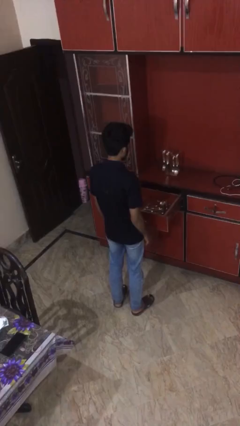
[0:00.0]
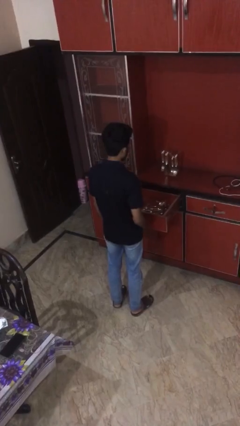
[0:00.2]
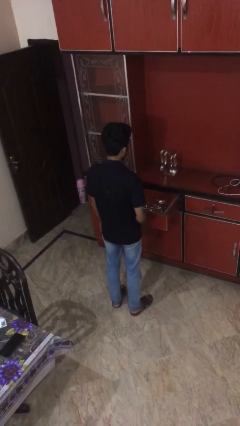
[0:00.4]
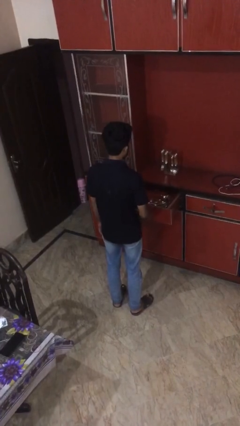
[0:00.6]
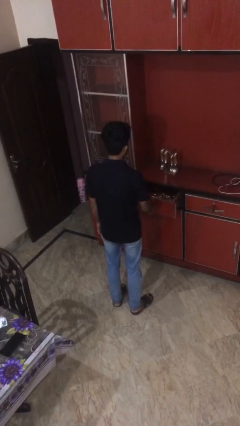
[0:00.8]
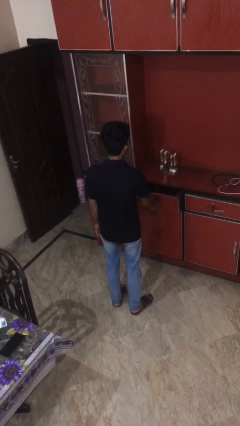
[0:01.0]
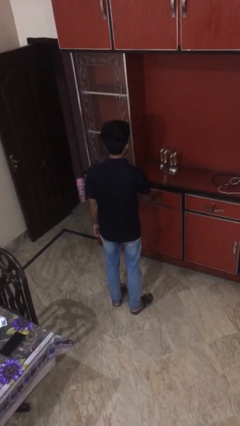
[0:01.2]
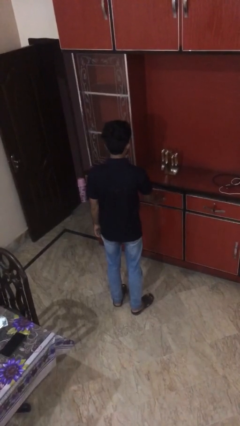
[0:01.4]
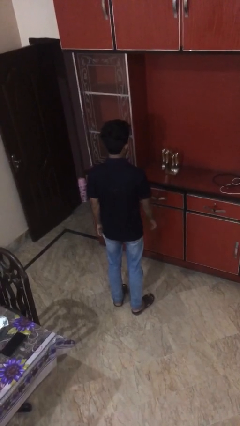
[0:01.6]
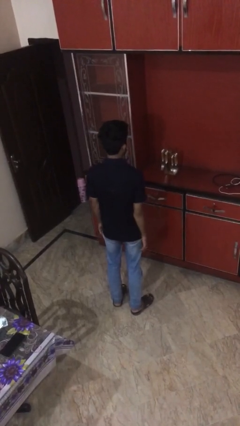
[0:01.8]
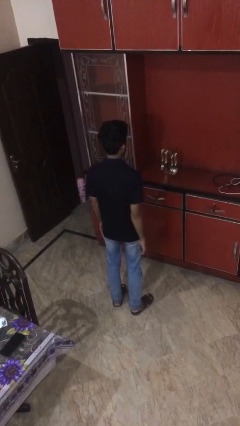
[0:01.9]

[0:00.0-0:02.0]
person closes kitchen drawer

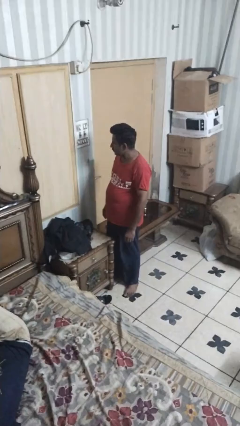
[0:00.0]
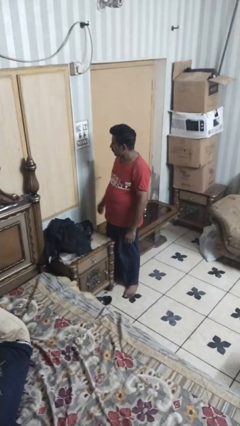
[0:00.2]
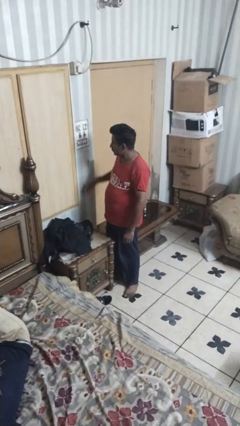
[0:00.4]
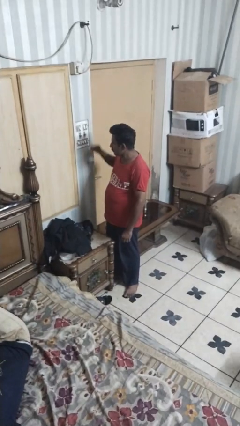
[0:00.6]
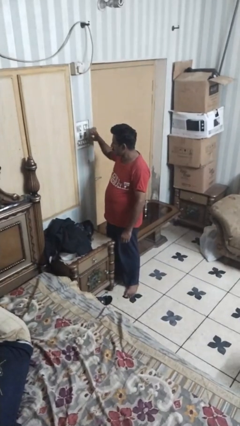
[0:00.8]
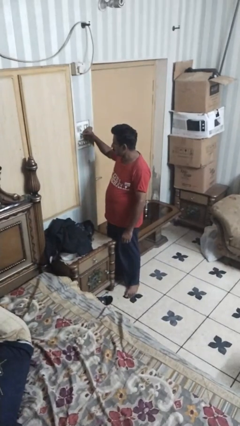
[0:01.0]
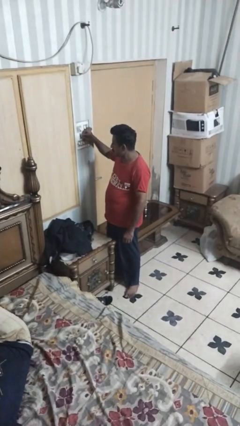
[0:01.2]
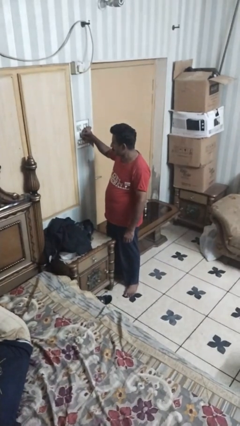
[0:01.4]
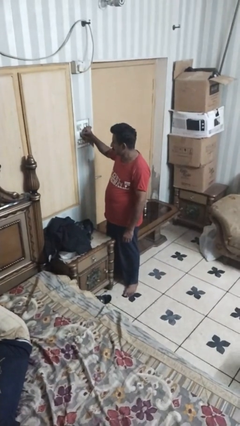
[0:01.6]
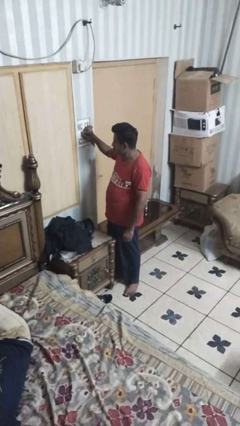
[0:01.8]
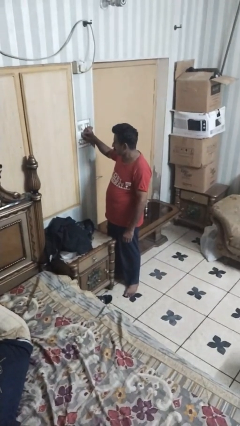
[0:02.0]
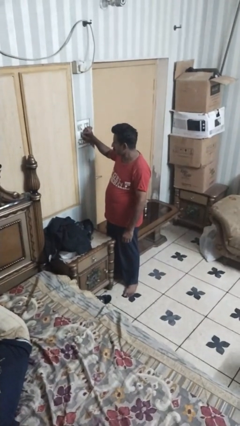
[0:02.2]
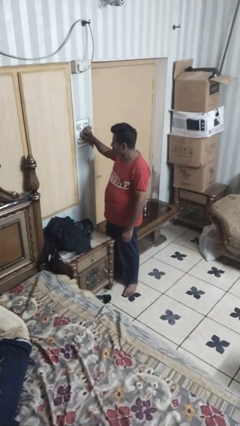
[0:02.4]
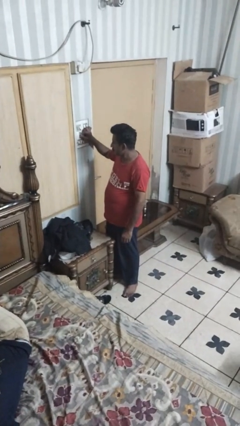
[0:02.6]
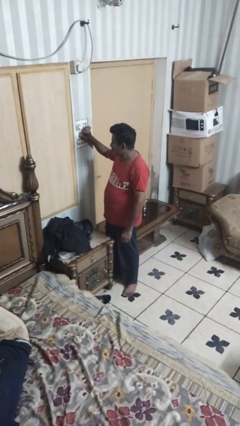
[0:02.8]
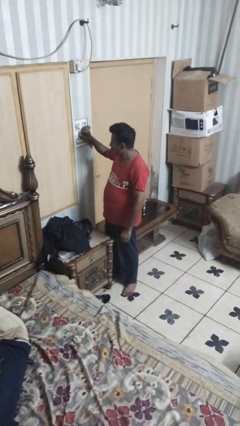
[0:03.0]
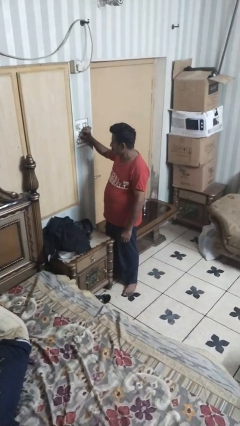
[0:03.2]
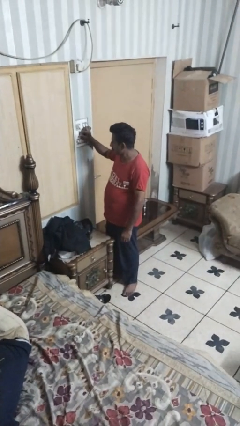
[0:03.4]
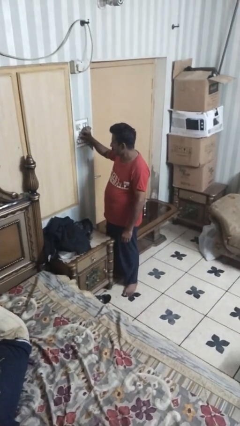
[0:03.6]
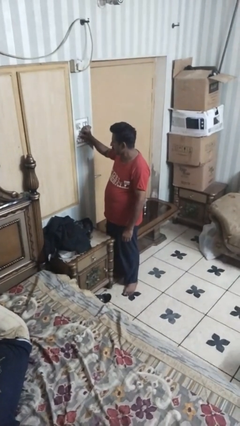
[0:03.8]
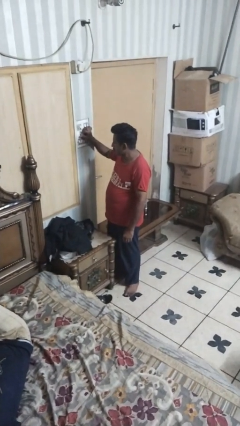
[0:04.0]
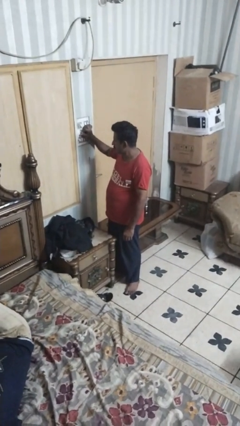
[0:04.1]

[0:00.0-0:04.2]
person adjusts thermostat

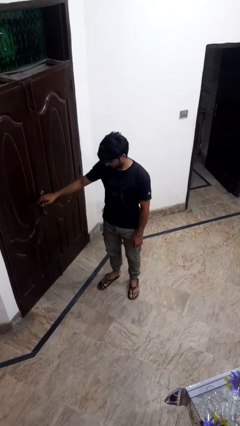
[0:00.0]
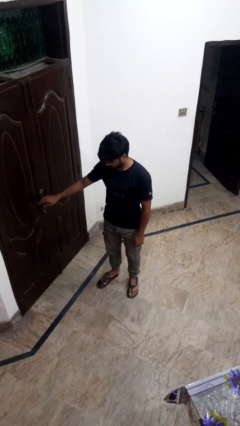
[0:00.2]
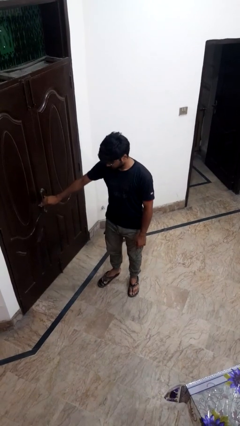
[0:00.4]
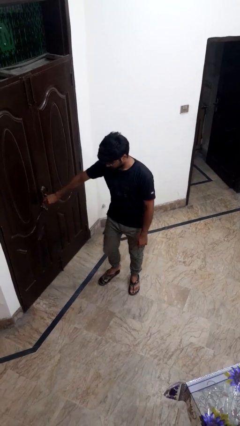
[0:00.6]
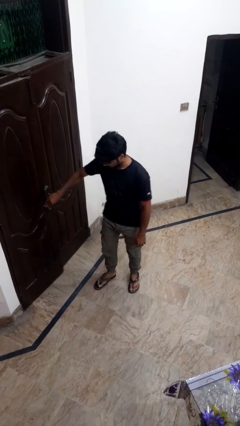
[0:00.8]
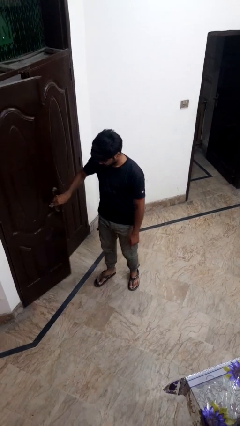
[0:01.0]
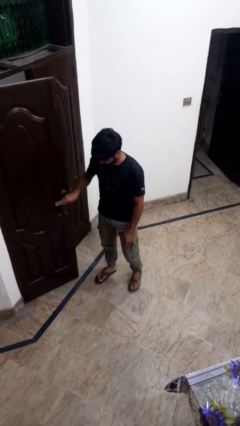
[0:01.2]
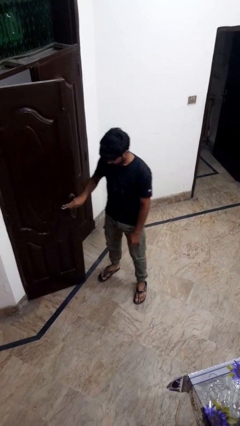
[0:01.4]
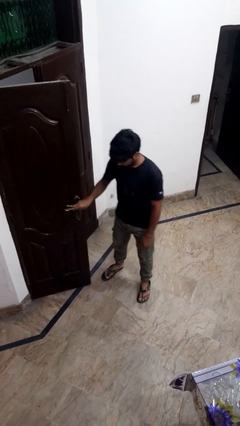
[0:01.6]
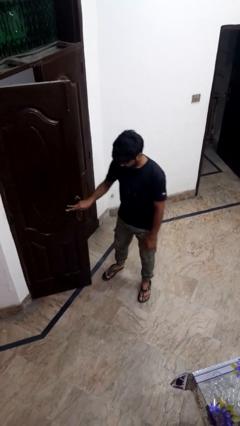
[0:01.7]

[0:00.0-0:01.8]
person opens facility door

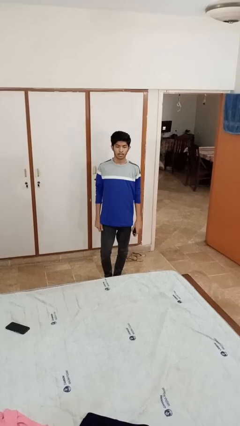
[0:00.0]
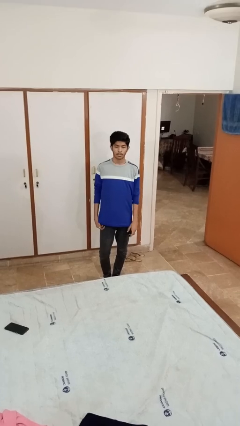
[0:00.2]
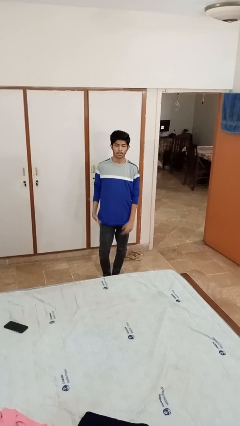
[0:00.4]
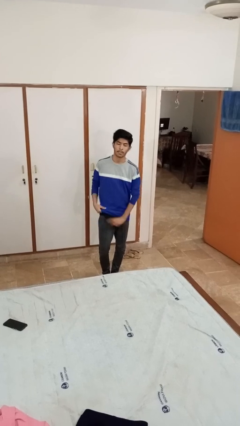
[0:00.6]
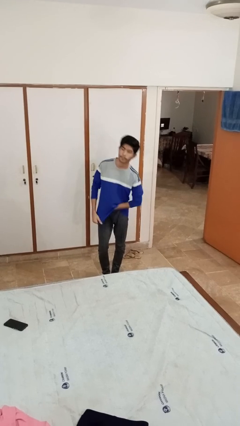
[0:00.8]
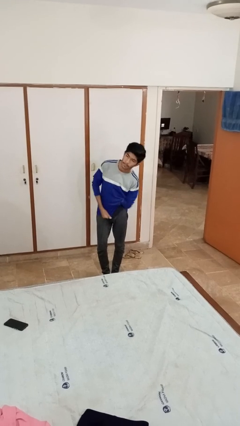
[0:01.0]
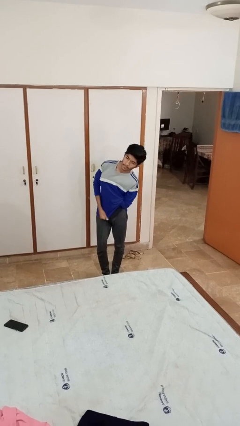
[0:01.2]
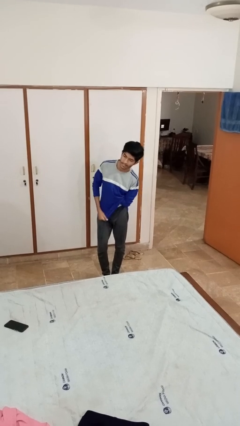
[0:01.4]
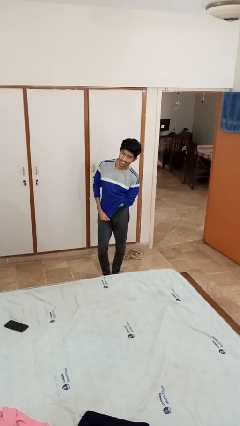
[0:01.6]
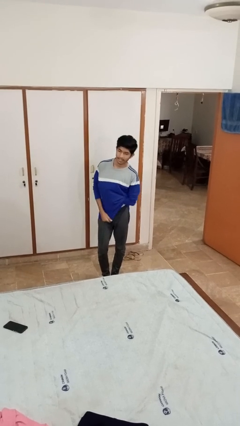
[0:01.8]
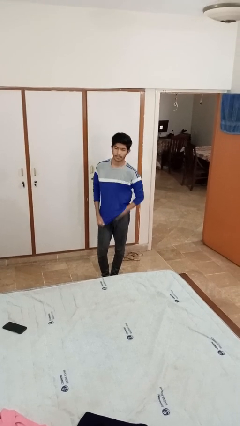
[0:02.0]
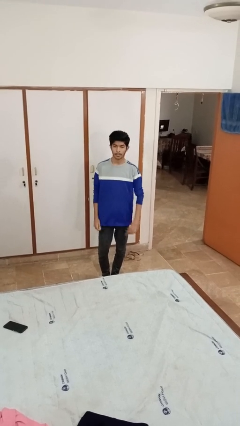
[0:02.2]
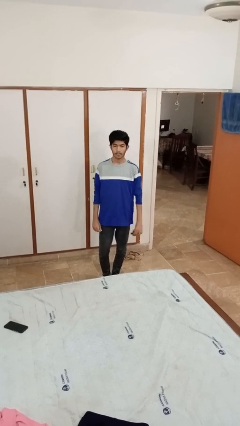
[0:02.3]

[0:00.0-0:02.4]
person applies deodorant

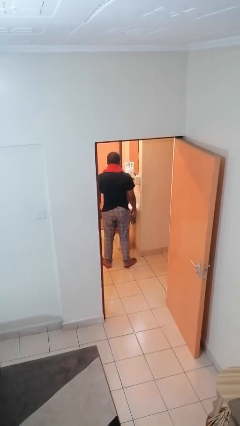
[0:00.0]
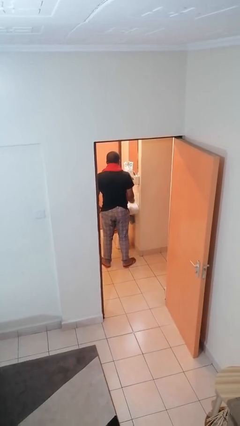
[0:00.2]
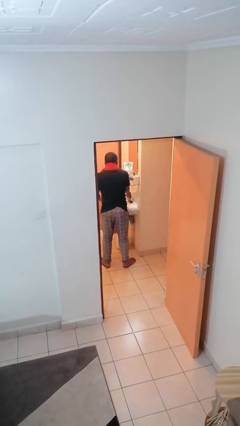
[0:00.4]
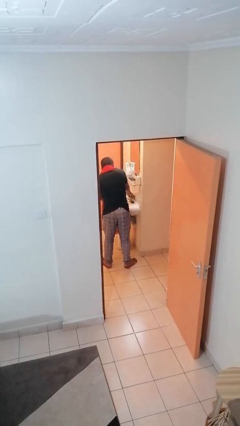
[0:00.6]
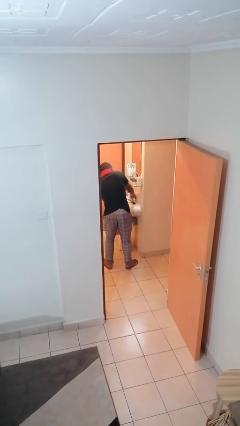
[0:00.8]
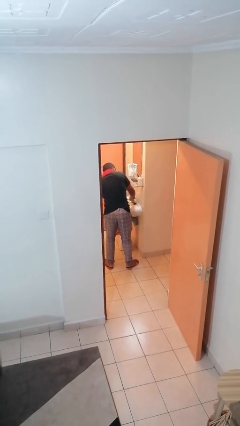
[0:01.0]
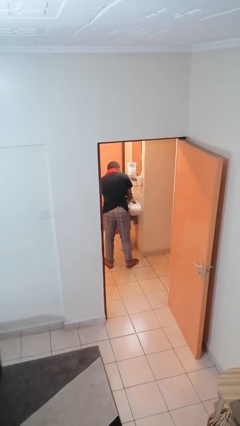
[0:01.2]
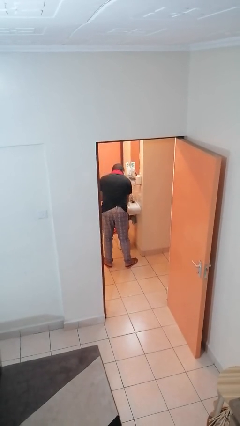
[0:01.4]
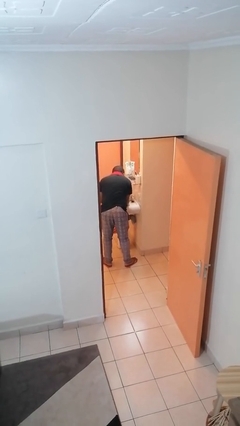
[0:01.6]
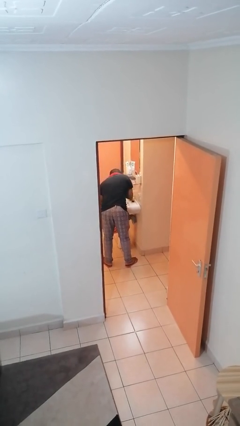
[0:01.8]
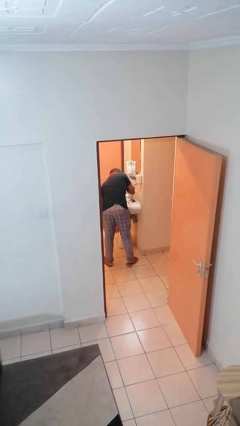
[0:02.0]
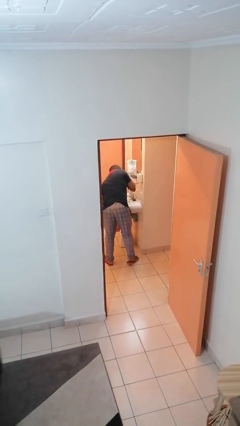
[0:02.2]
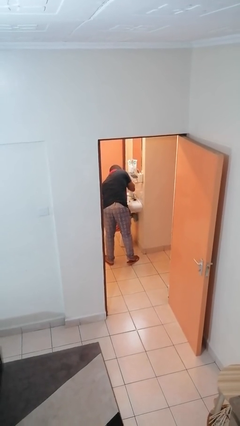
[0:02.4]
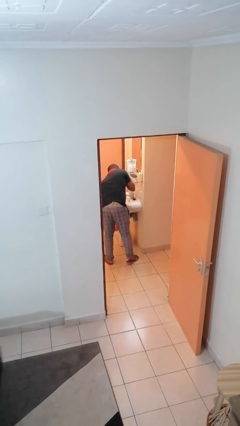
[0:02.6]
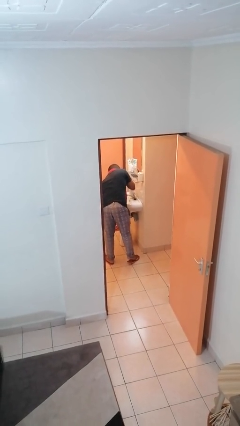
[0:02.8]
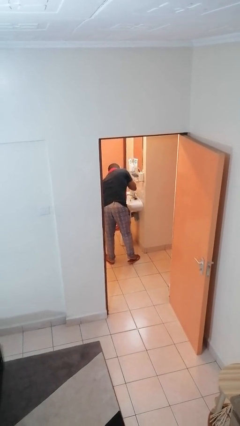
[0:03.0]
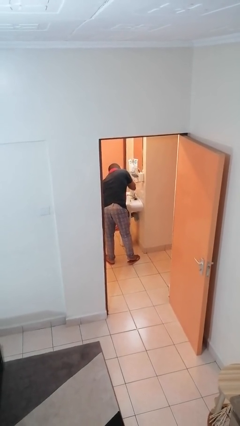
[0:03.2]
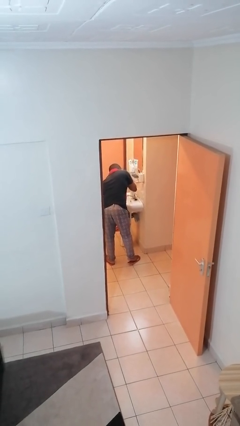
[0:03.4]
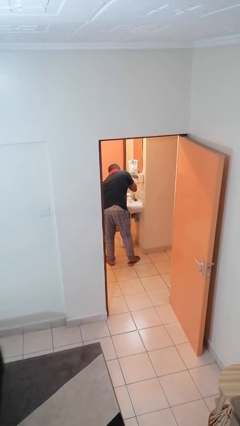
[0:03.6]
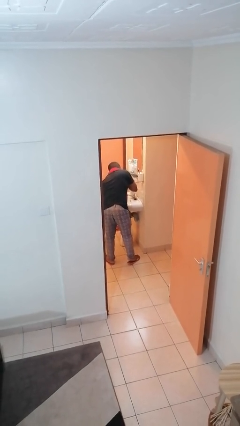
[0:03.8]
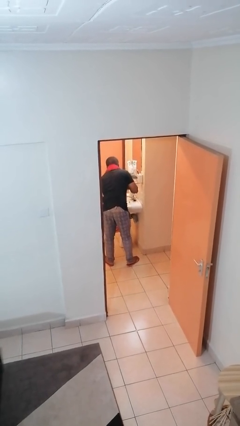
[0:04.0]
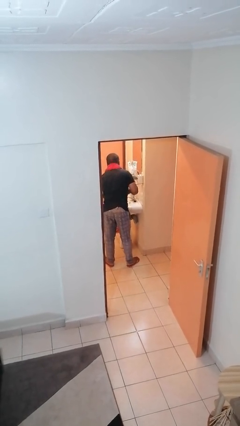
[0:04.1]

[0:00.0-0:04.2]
person washes face

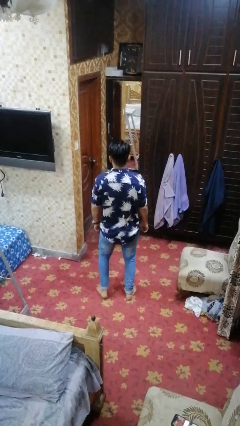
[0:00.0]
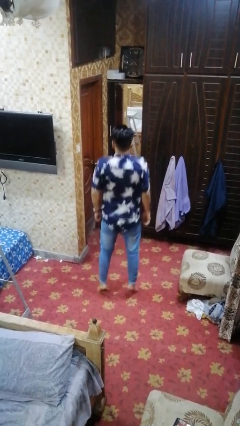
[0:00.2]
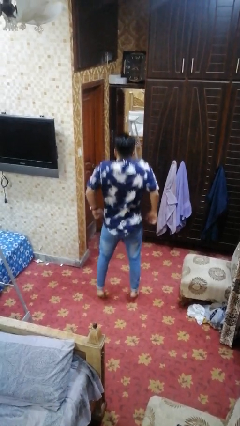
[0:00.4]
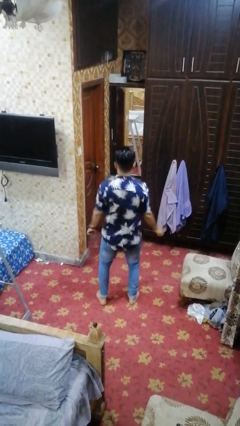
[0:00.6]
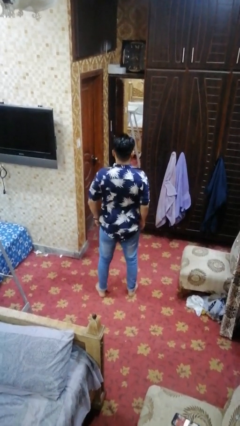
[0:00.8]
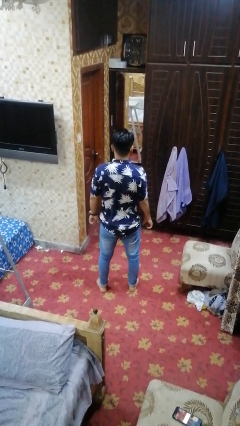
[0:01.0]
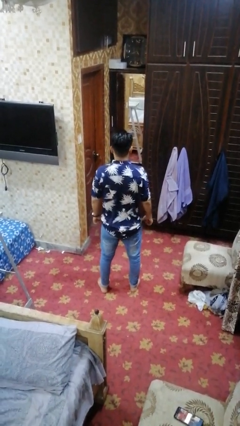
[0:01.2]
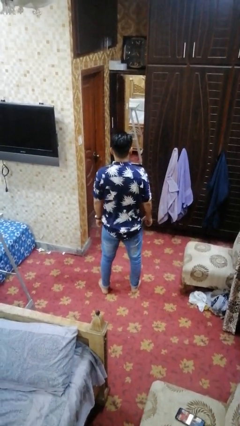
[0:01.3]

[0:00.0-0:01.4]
person jumps

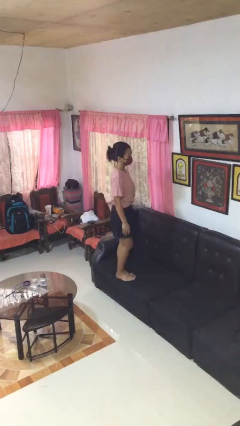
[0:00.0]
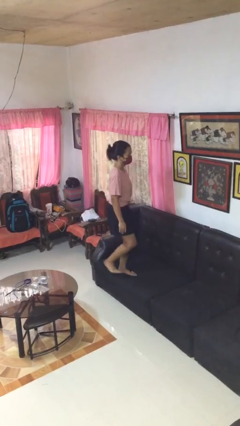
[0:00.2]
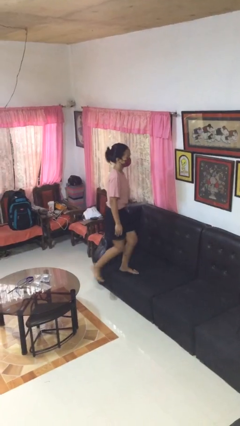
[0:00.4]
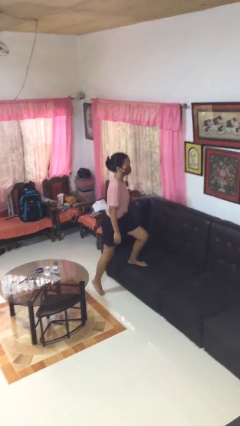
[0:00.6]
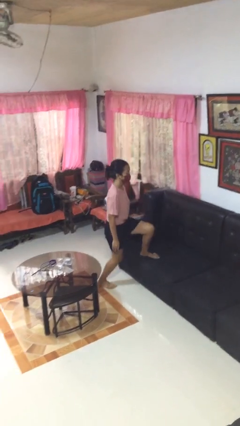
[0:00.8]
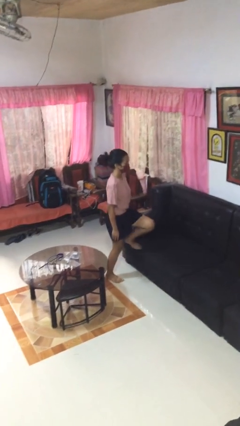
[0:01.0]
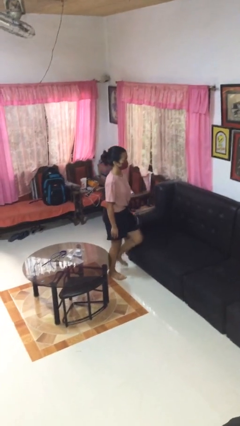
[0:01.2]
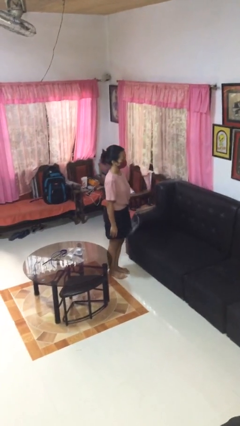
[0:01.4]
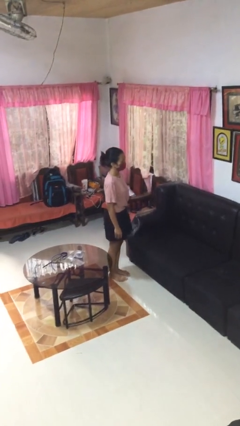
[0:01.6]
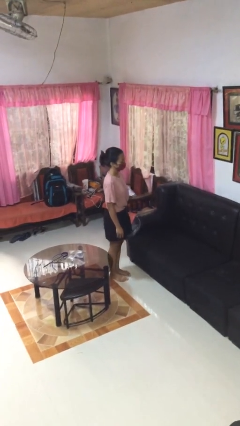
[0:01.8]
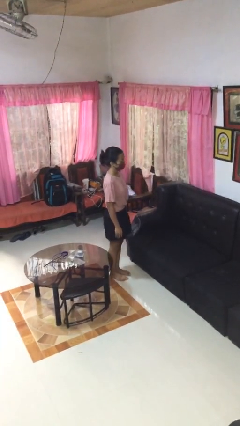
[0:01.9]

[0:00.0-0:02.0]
person climbs off couch
